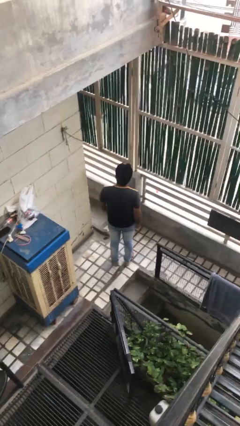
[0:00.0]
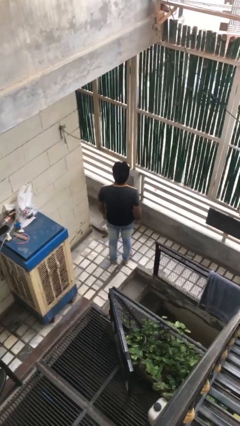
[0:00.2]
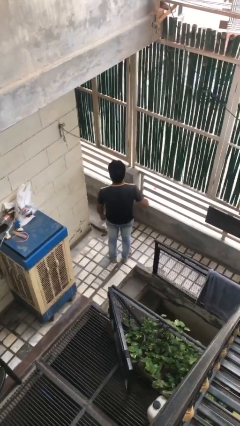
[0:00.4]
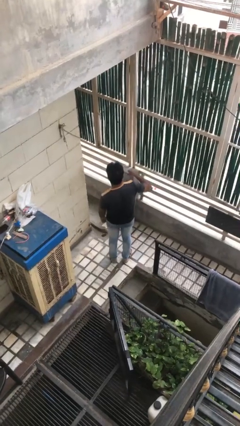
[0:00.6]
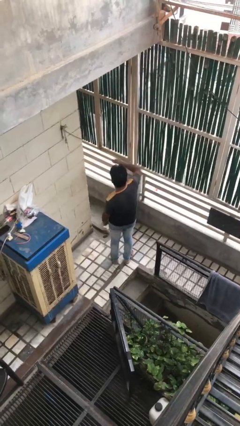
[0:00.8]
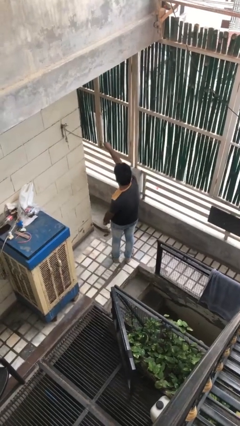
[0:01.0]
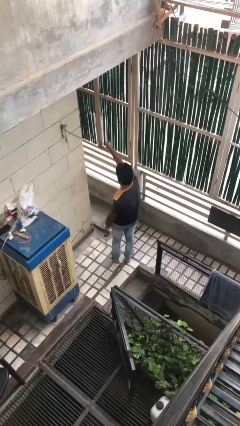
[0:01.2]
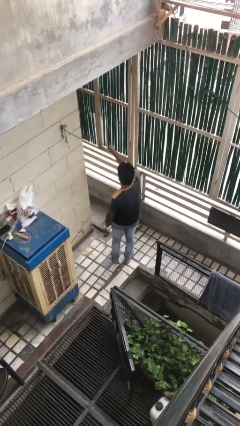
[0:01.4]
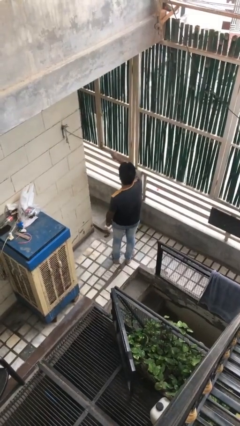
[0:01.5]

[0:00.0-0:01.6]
person punches

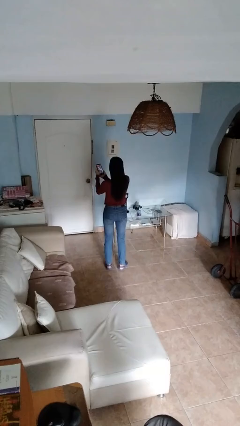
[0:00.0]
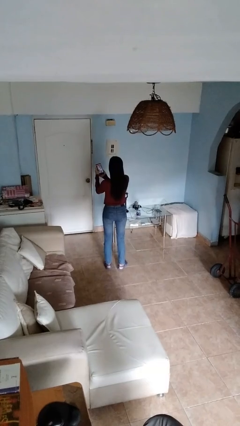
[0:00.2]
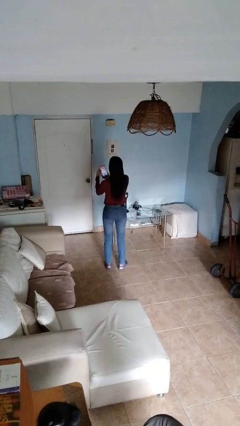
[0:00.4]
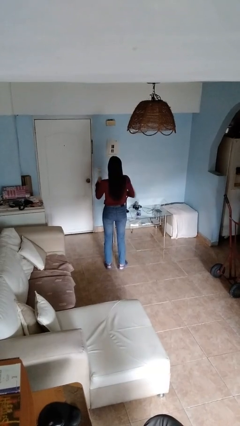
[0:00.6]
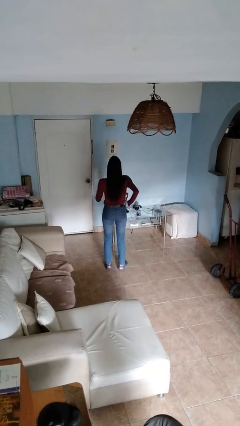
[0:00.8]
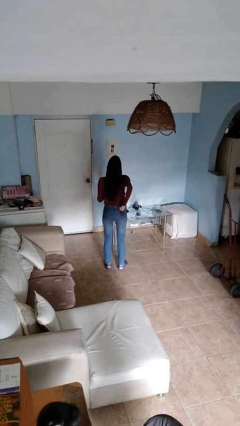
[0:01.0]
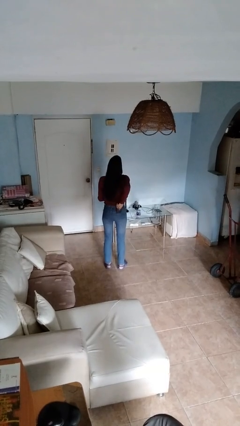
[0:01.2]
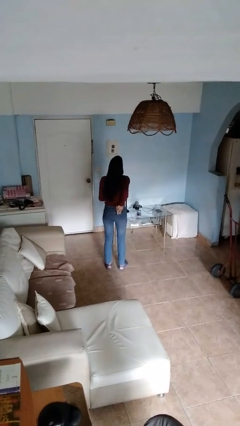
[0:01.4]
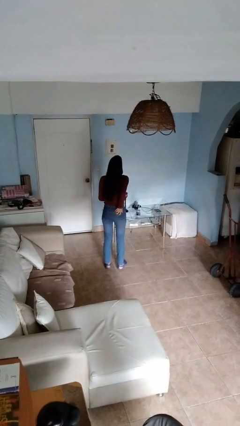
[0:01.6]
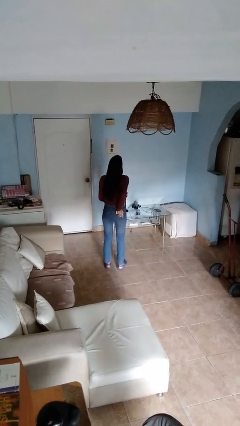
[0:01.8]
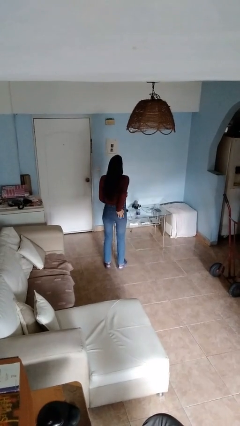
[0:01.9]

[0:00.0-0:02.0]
person puts phone into pocket

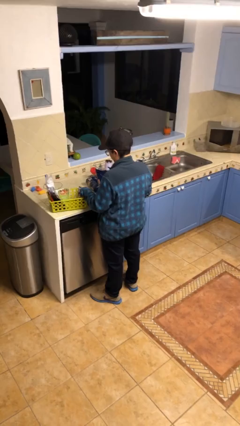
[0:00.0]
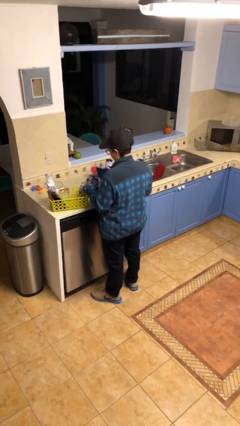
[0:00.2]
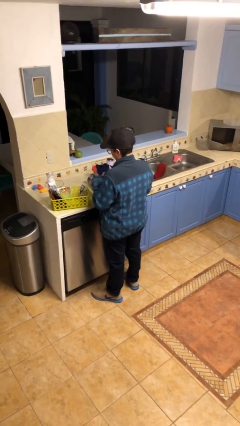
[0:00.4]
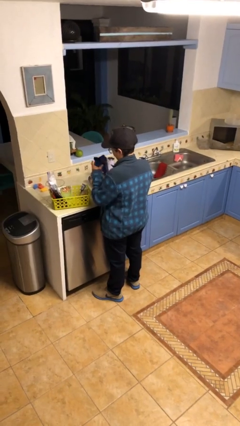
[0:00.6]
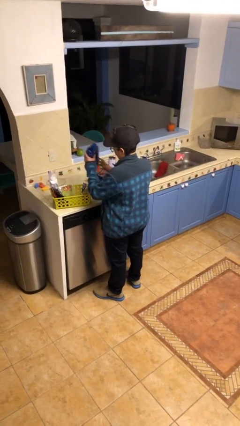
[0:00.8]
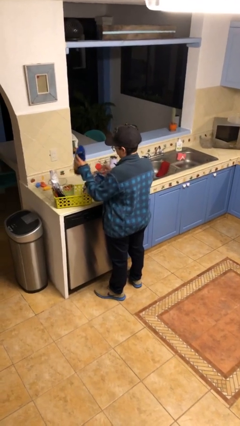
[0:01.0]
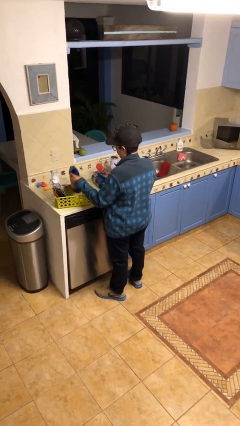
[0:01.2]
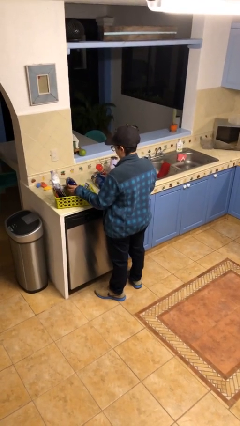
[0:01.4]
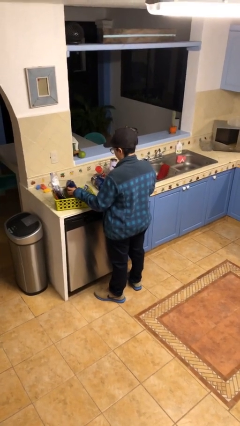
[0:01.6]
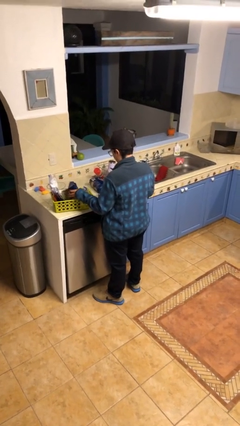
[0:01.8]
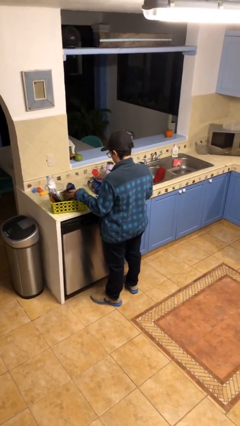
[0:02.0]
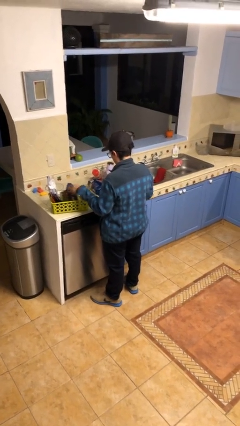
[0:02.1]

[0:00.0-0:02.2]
person puts object into basket

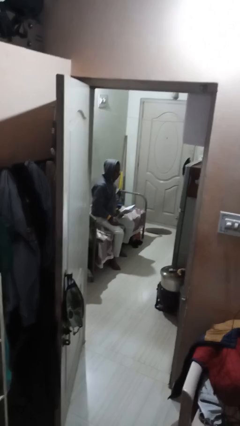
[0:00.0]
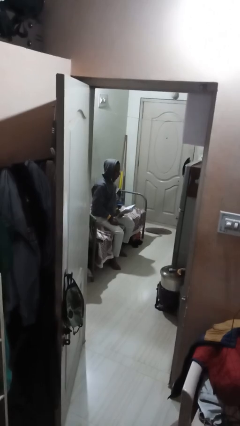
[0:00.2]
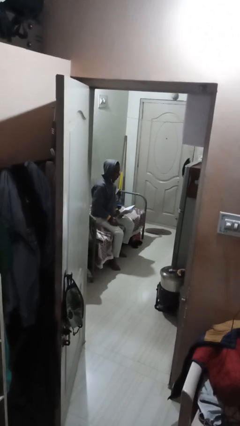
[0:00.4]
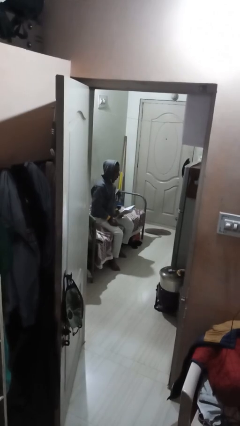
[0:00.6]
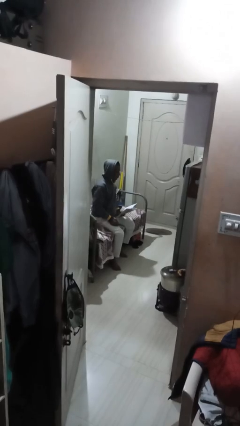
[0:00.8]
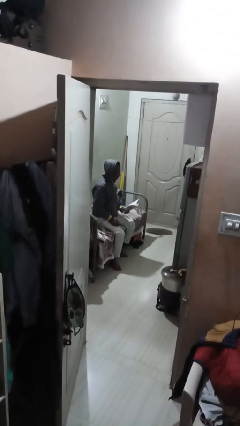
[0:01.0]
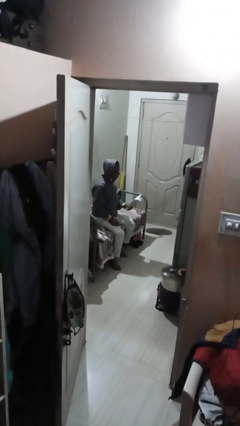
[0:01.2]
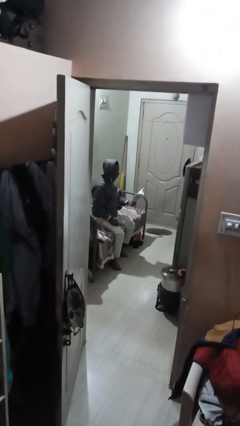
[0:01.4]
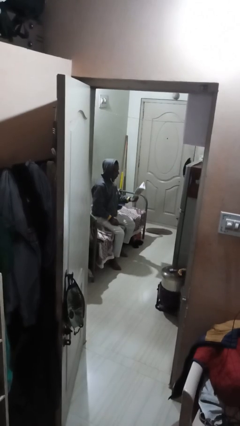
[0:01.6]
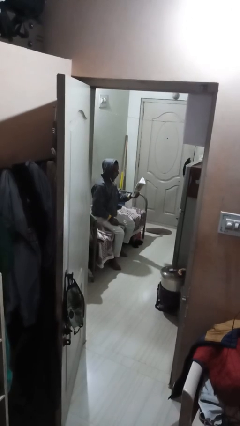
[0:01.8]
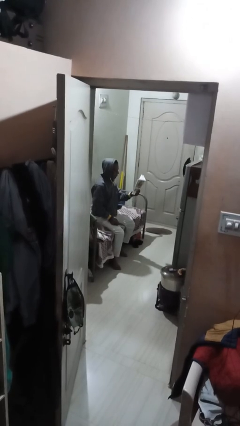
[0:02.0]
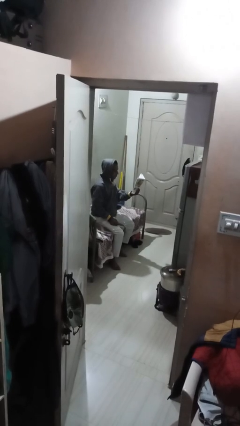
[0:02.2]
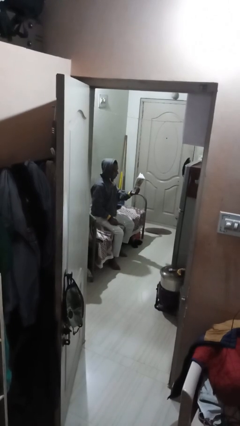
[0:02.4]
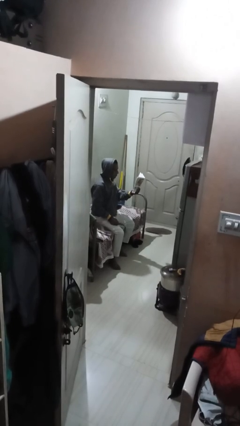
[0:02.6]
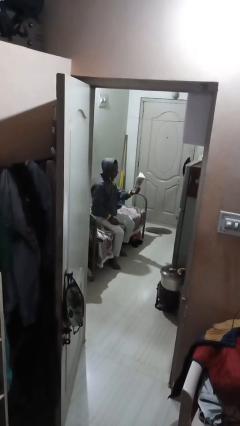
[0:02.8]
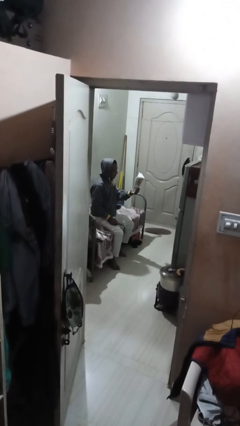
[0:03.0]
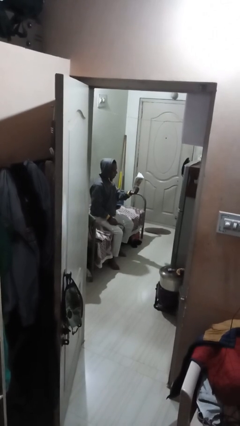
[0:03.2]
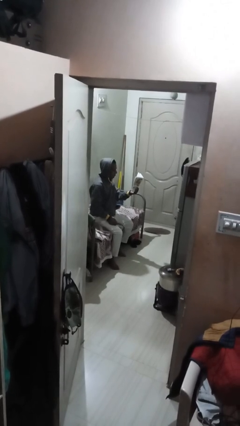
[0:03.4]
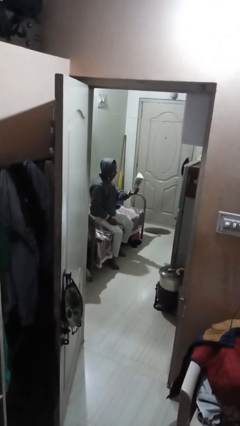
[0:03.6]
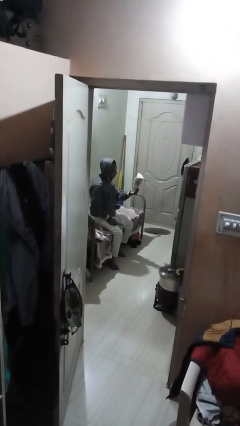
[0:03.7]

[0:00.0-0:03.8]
person reads document

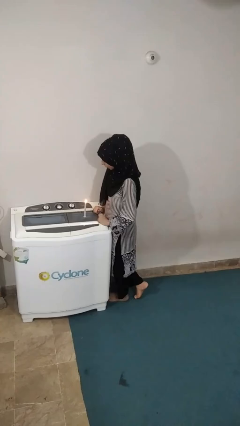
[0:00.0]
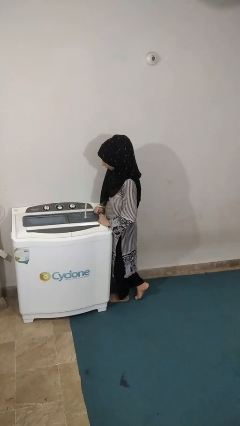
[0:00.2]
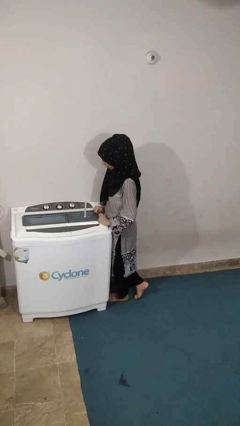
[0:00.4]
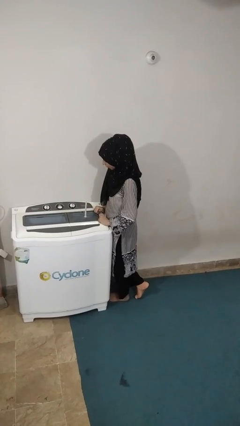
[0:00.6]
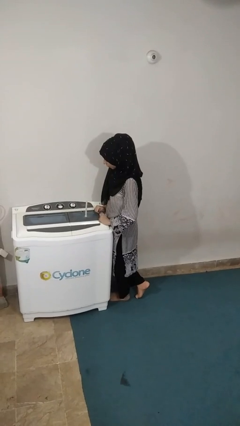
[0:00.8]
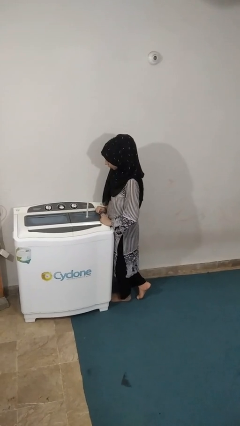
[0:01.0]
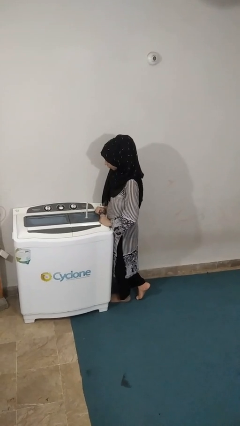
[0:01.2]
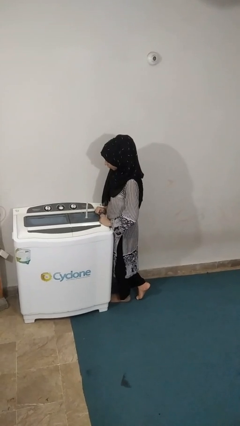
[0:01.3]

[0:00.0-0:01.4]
person extinguishes candle

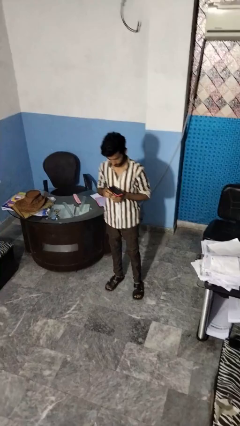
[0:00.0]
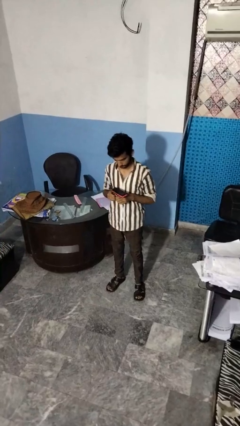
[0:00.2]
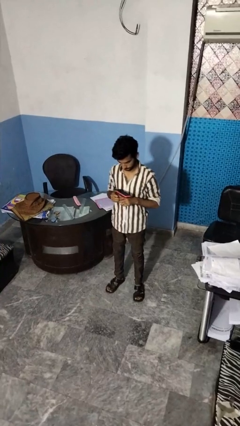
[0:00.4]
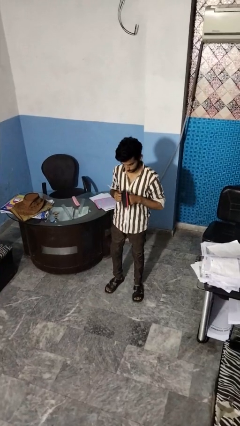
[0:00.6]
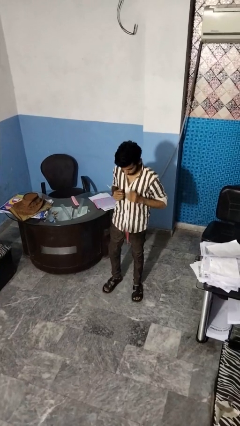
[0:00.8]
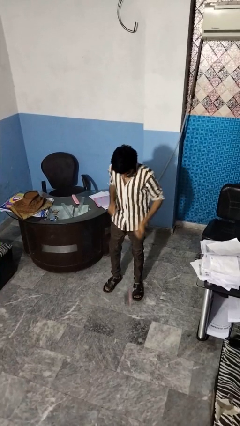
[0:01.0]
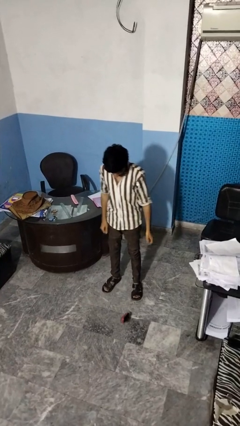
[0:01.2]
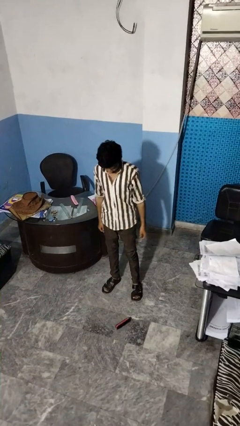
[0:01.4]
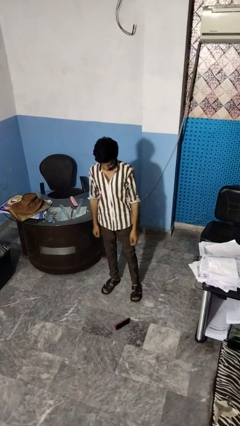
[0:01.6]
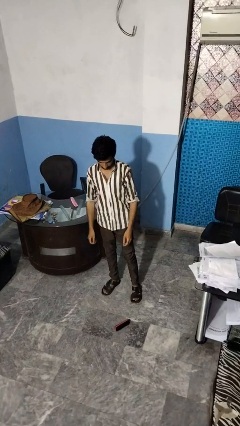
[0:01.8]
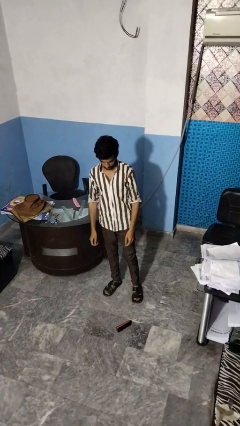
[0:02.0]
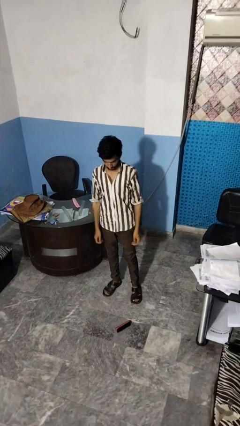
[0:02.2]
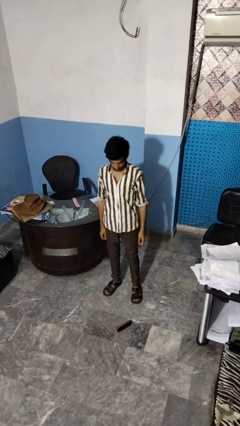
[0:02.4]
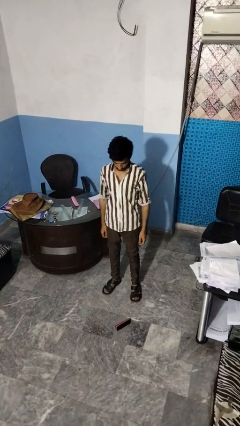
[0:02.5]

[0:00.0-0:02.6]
person drops object

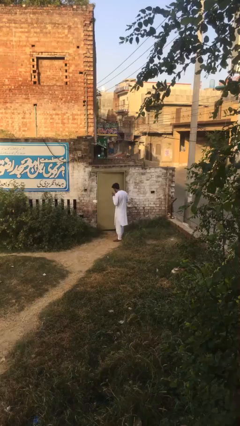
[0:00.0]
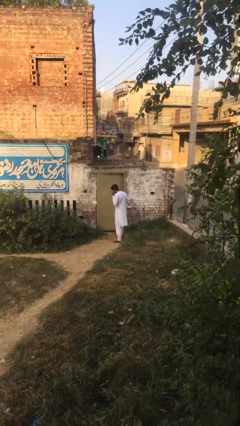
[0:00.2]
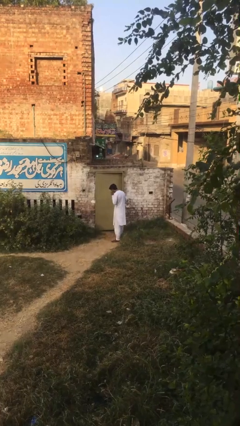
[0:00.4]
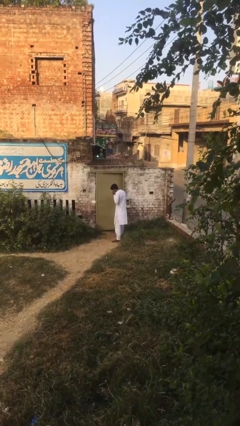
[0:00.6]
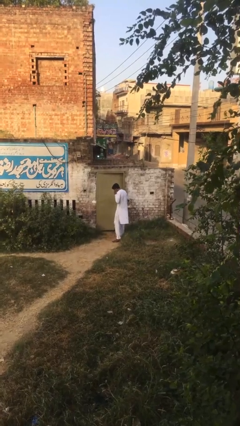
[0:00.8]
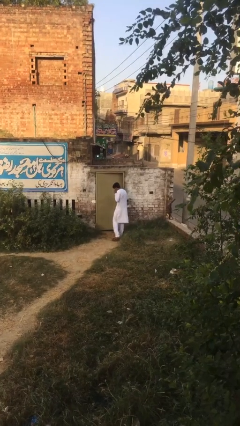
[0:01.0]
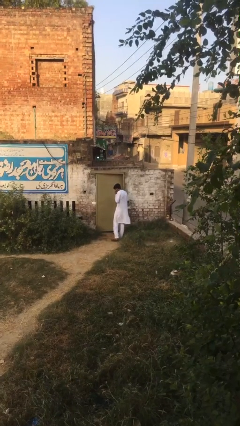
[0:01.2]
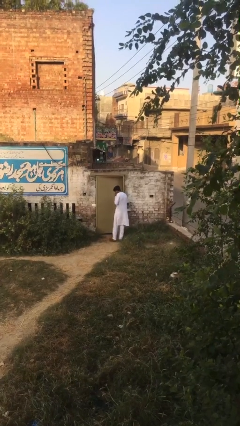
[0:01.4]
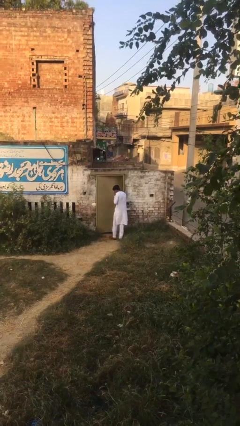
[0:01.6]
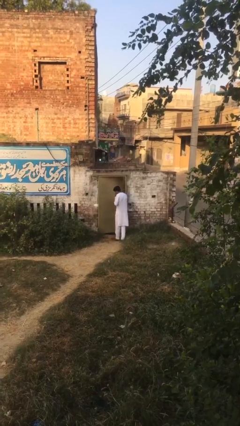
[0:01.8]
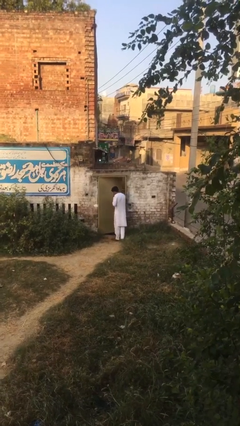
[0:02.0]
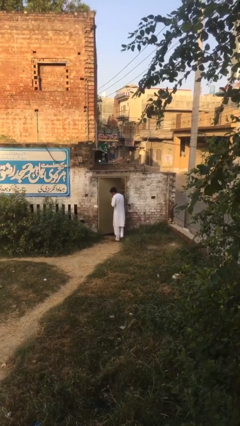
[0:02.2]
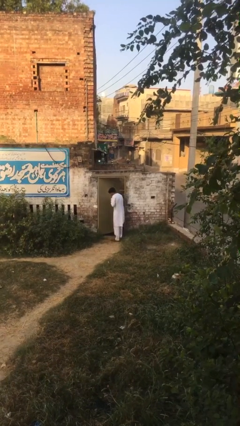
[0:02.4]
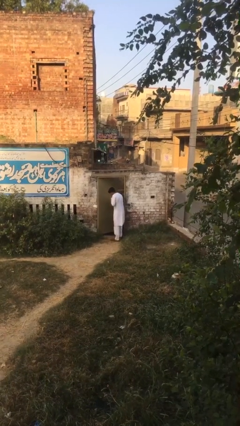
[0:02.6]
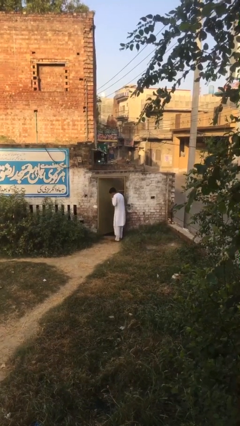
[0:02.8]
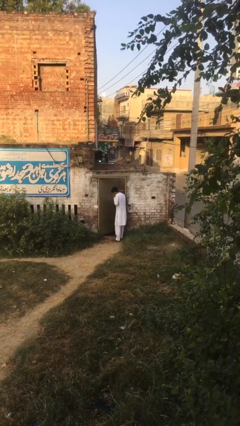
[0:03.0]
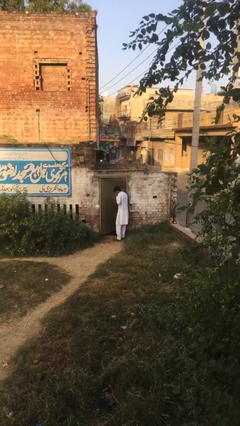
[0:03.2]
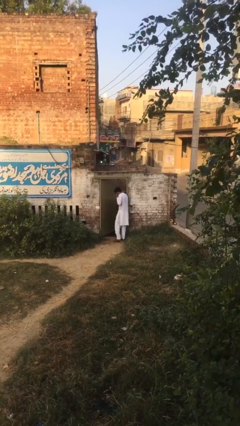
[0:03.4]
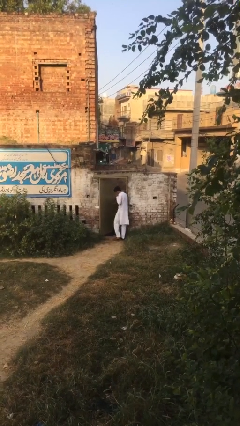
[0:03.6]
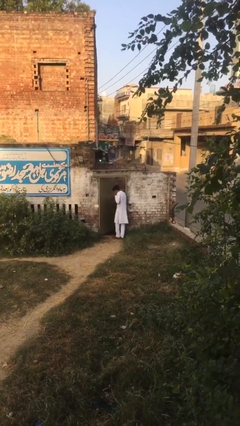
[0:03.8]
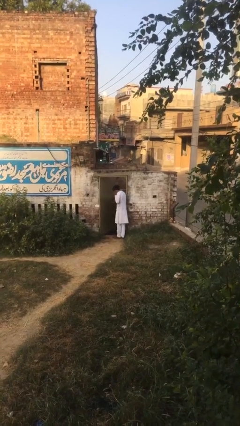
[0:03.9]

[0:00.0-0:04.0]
person opens facility door
